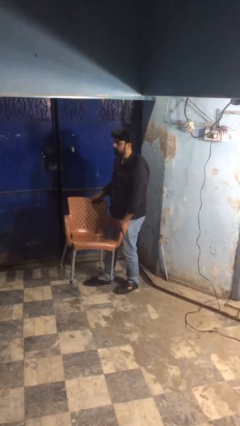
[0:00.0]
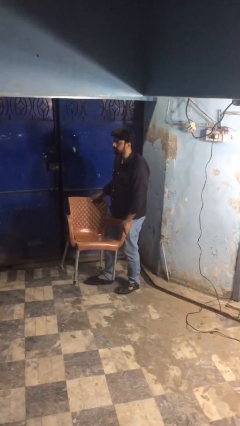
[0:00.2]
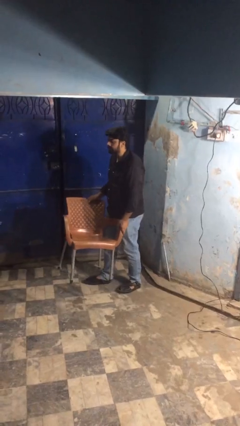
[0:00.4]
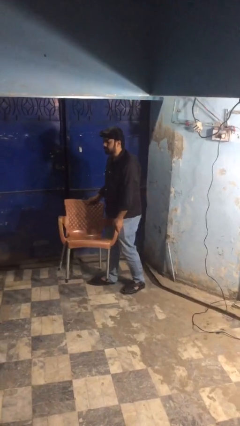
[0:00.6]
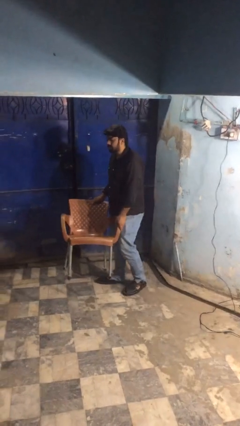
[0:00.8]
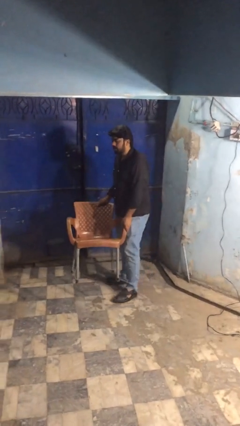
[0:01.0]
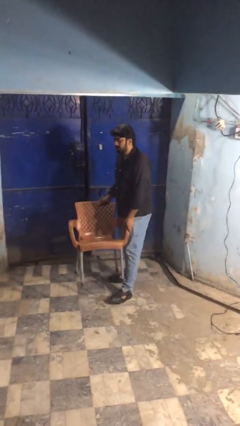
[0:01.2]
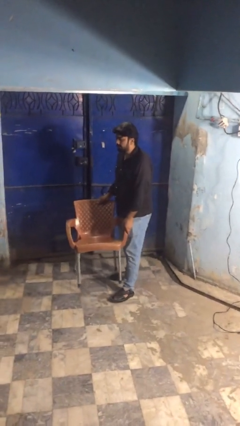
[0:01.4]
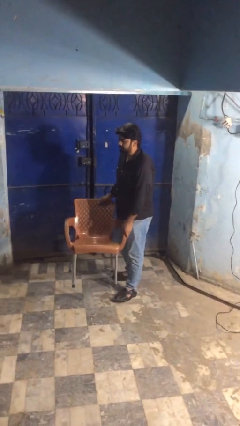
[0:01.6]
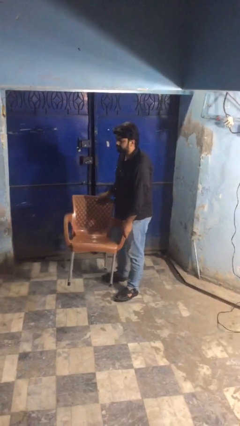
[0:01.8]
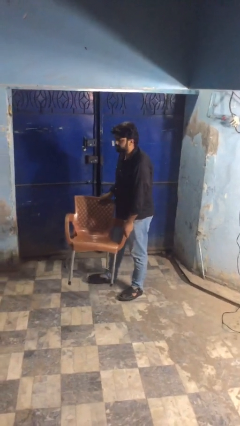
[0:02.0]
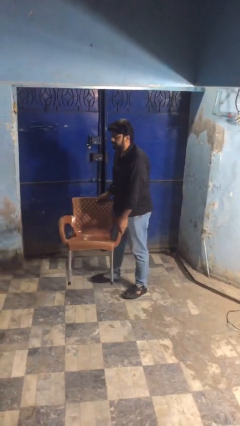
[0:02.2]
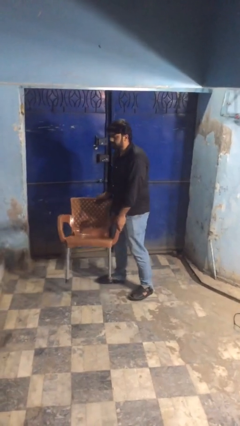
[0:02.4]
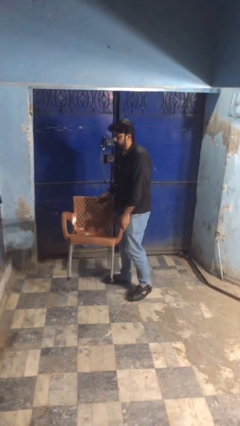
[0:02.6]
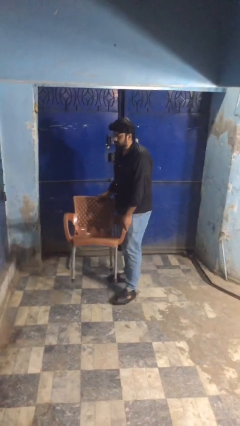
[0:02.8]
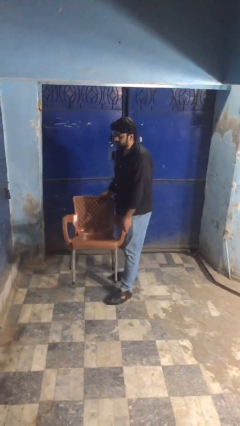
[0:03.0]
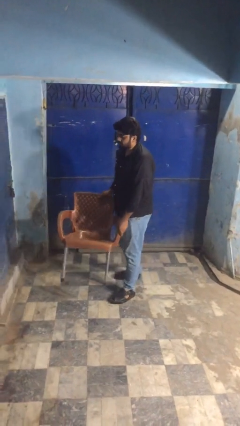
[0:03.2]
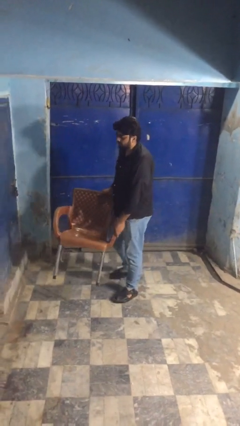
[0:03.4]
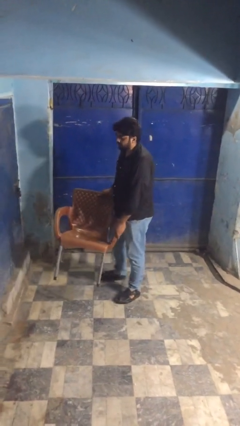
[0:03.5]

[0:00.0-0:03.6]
person carries heavy object

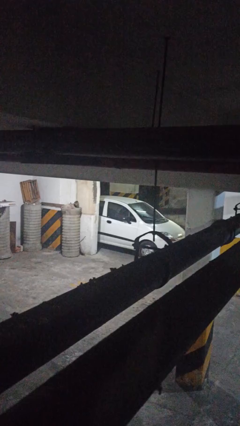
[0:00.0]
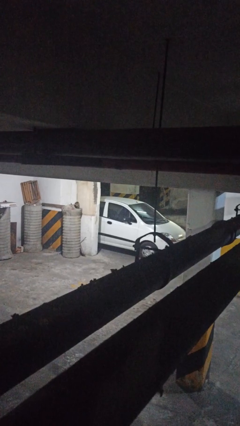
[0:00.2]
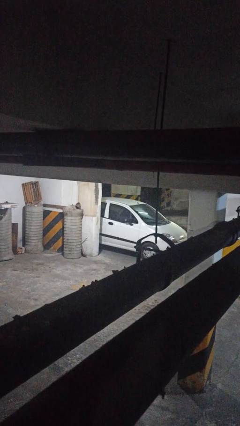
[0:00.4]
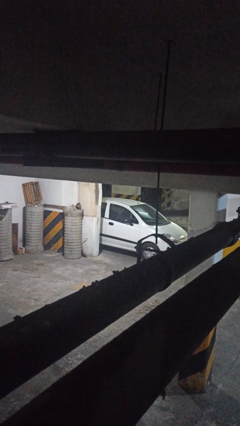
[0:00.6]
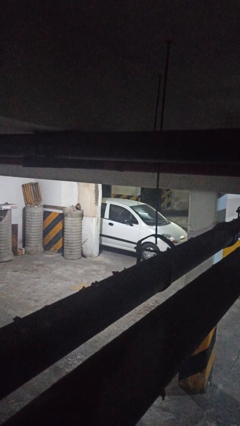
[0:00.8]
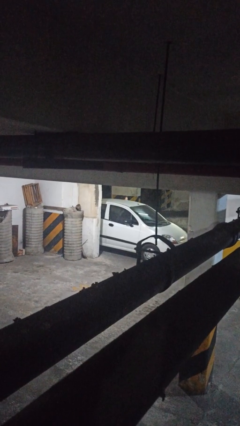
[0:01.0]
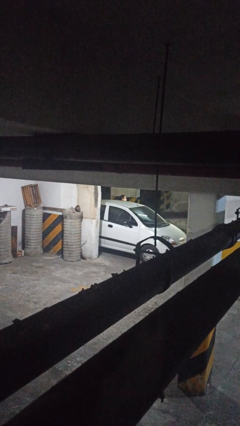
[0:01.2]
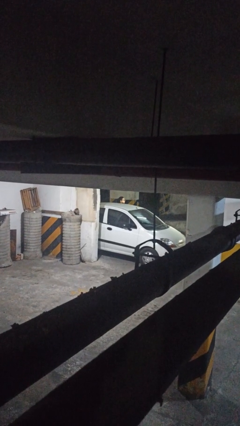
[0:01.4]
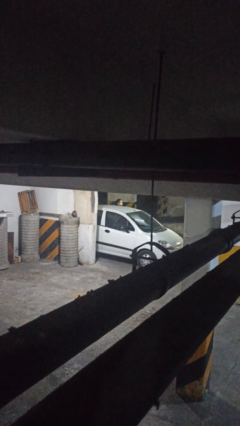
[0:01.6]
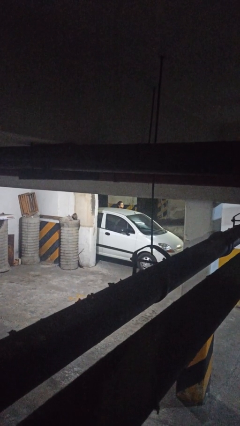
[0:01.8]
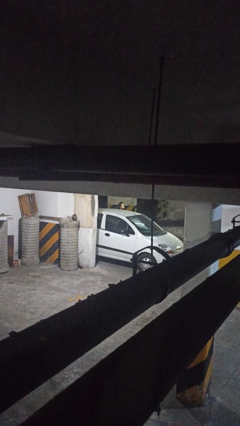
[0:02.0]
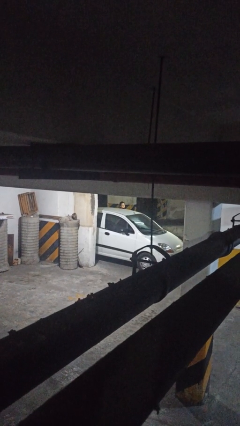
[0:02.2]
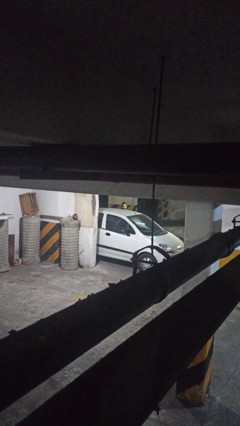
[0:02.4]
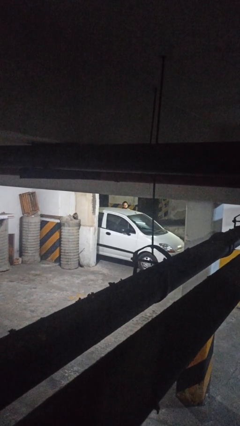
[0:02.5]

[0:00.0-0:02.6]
person exits car

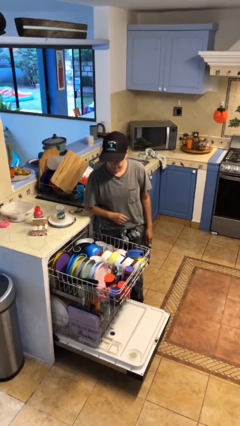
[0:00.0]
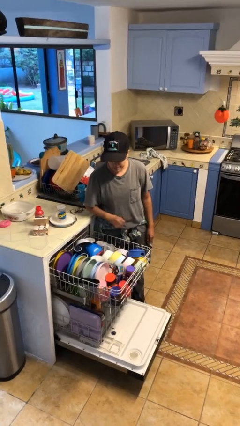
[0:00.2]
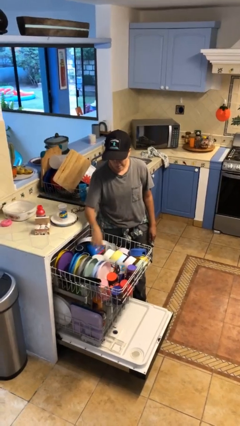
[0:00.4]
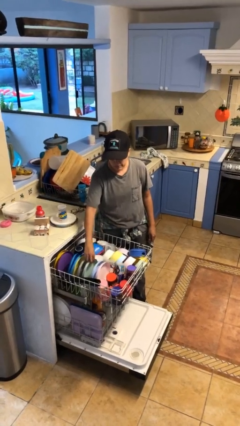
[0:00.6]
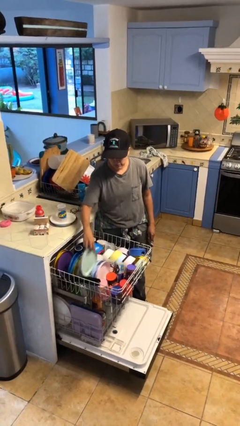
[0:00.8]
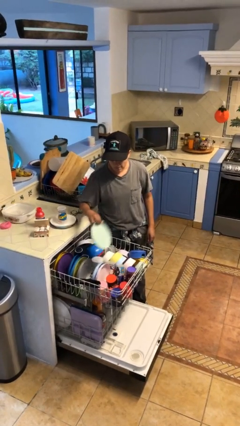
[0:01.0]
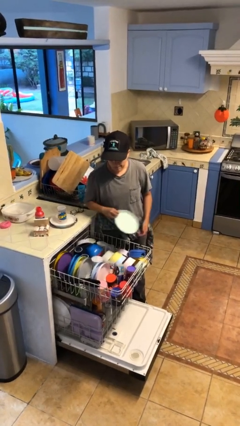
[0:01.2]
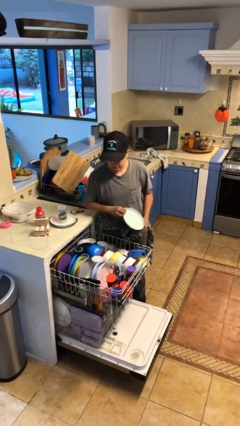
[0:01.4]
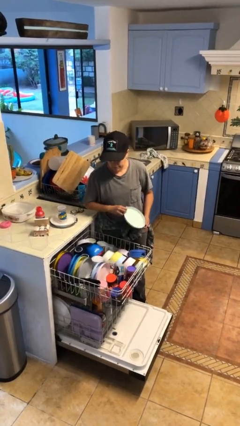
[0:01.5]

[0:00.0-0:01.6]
person unloads dishwasher

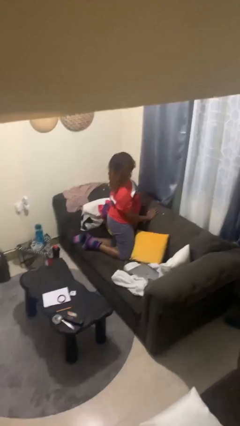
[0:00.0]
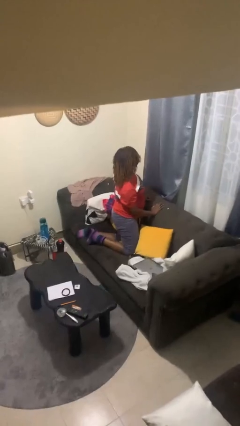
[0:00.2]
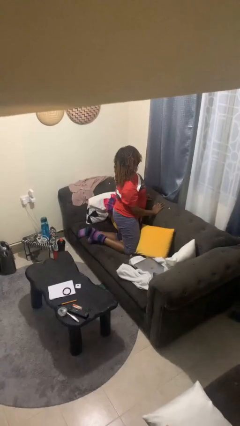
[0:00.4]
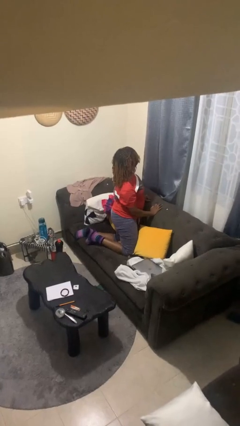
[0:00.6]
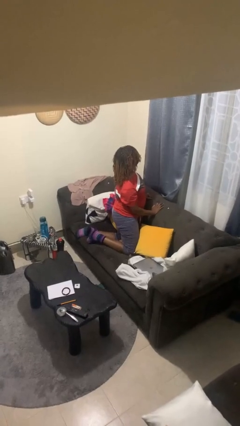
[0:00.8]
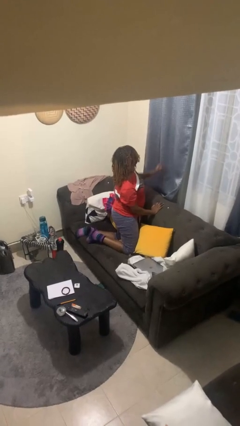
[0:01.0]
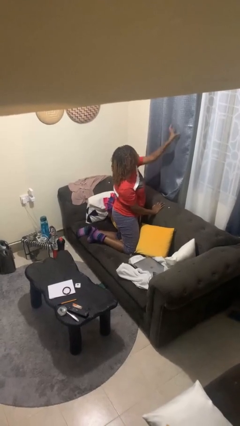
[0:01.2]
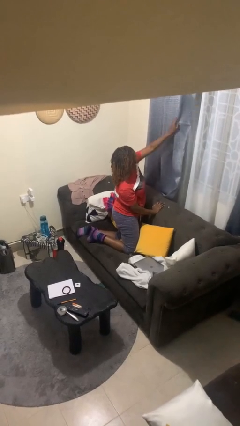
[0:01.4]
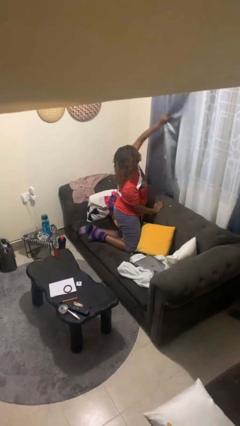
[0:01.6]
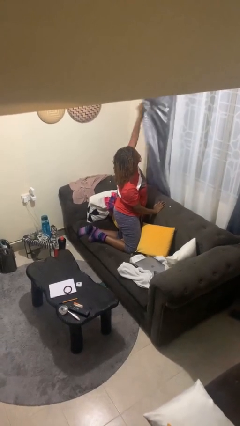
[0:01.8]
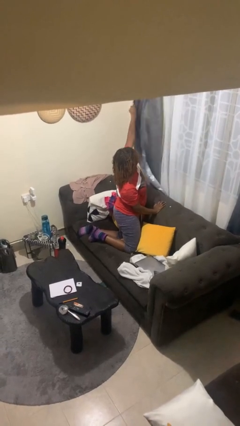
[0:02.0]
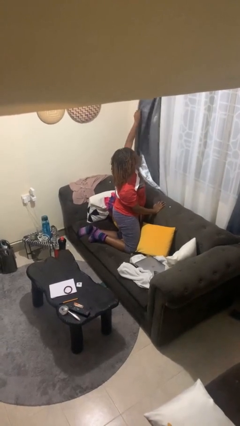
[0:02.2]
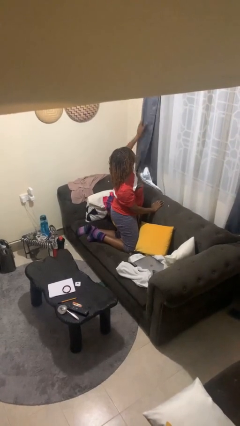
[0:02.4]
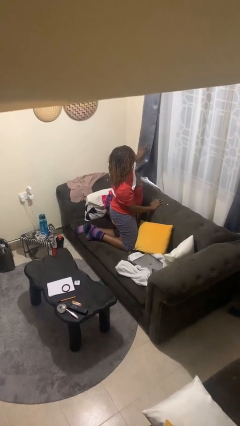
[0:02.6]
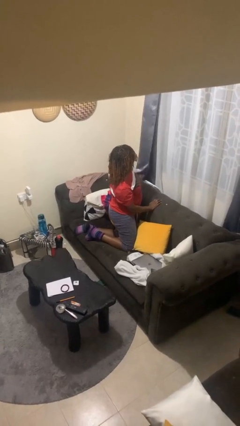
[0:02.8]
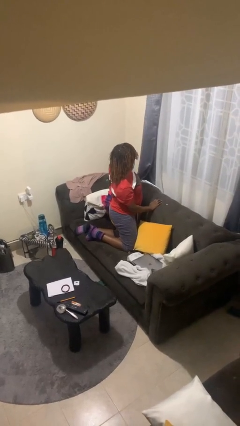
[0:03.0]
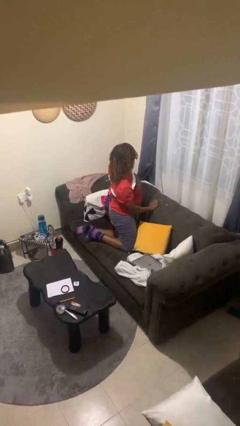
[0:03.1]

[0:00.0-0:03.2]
person opens curtains

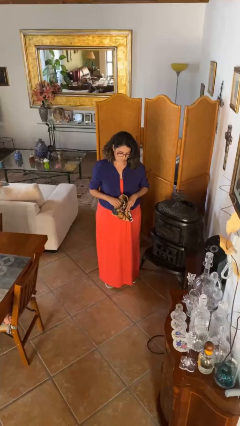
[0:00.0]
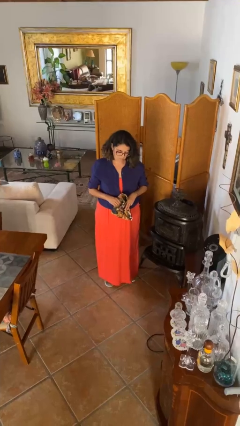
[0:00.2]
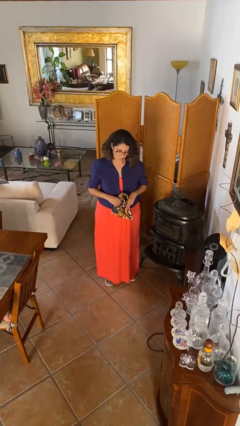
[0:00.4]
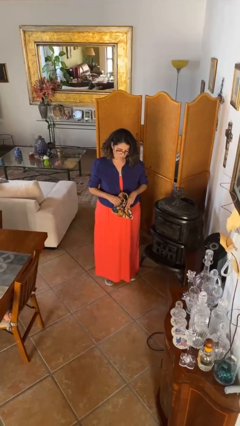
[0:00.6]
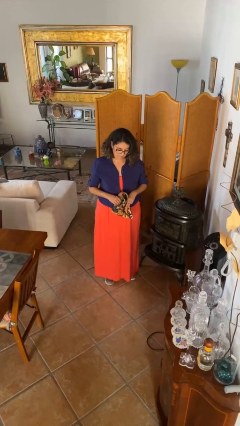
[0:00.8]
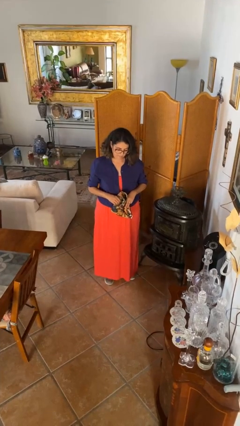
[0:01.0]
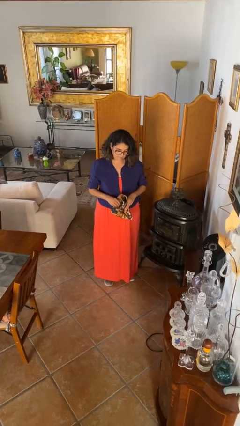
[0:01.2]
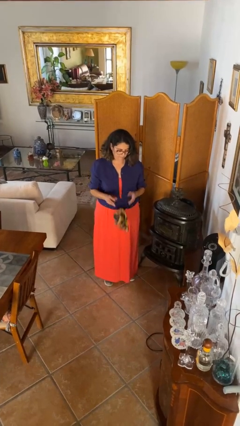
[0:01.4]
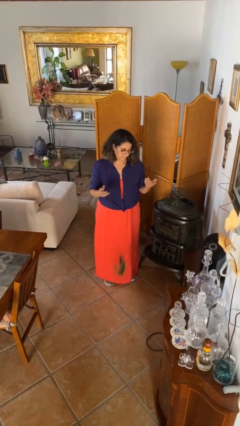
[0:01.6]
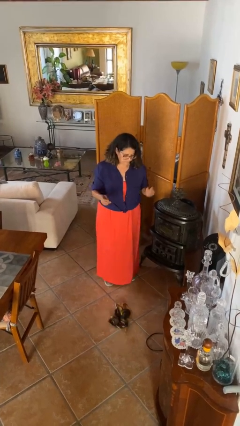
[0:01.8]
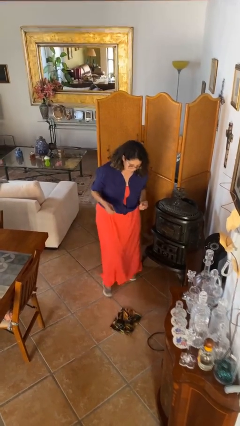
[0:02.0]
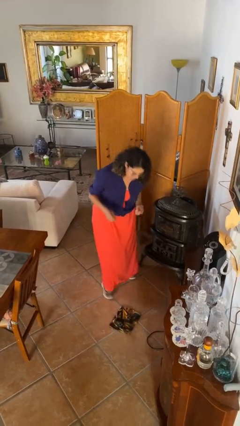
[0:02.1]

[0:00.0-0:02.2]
person drops object

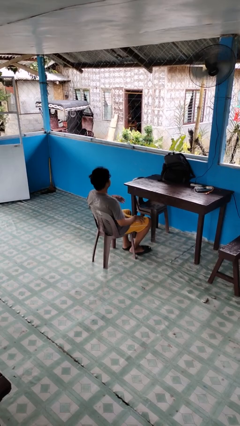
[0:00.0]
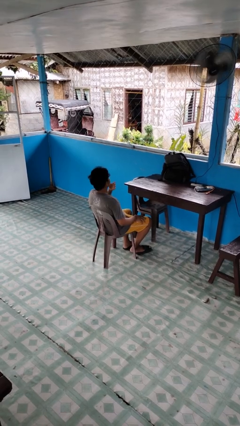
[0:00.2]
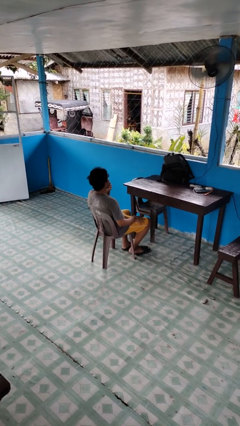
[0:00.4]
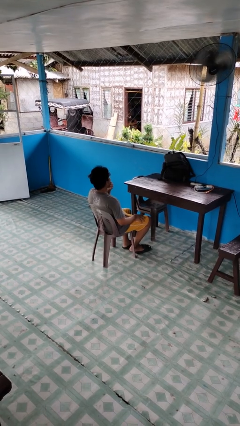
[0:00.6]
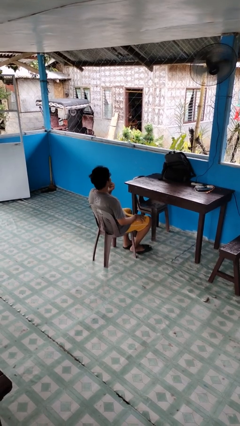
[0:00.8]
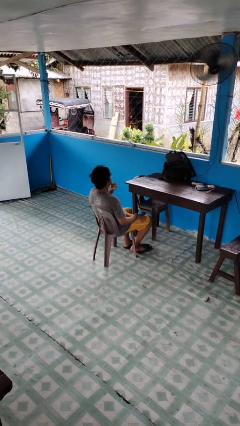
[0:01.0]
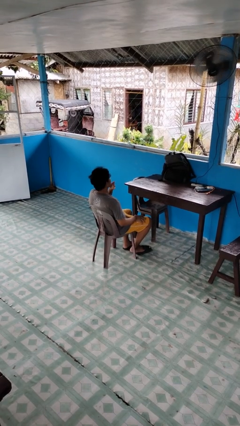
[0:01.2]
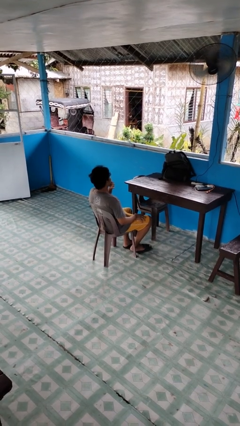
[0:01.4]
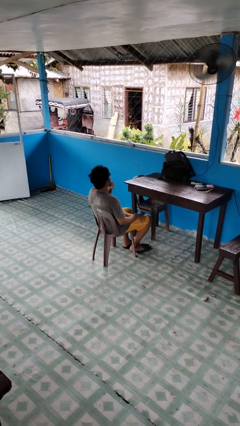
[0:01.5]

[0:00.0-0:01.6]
person strokes chin

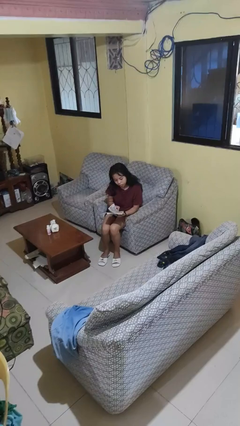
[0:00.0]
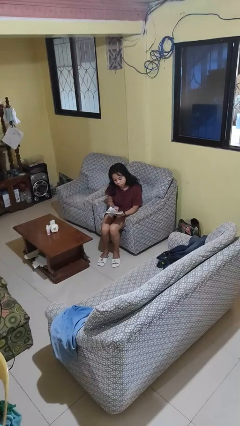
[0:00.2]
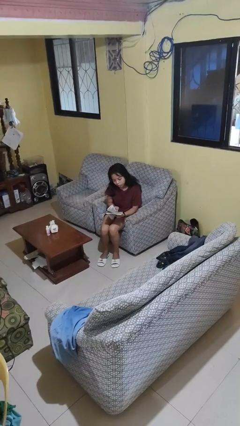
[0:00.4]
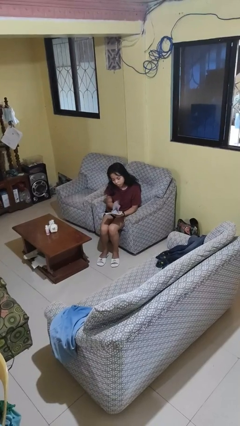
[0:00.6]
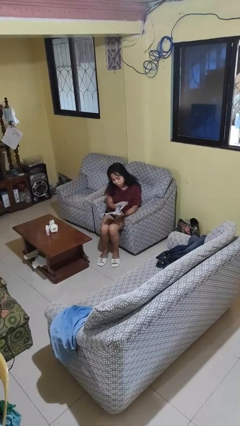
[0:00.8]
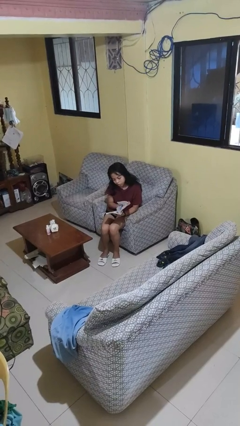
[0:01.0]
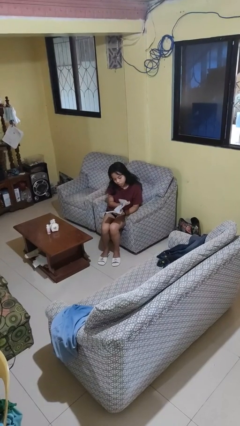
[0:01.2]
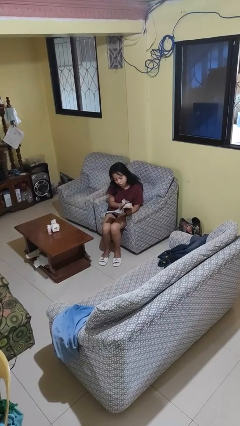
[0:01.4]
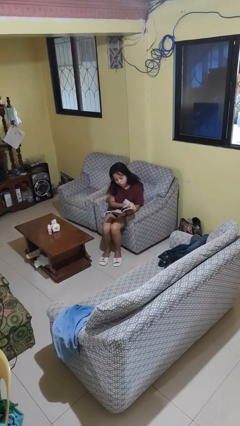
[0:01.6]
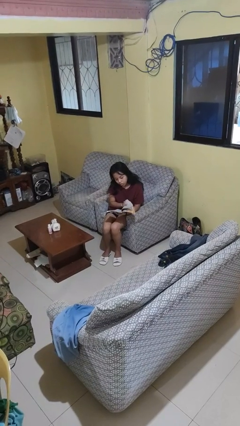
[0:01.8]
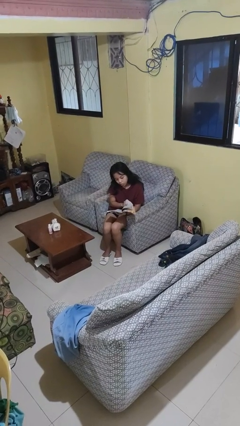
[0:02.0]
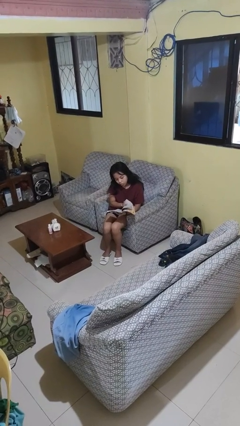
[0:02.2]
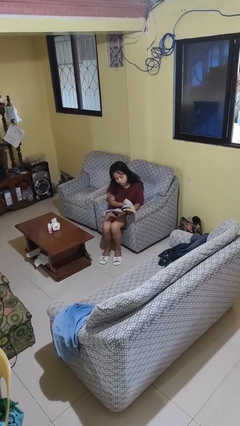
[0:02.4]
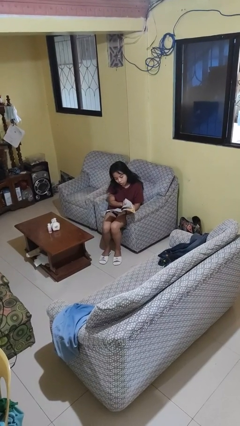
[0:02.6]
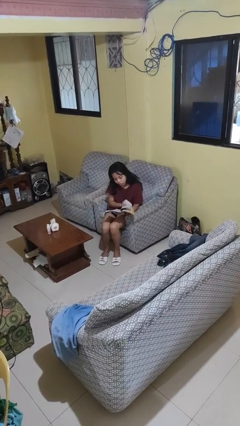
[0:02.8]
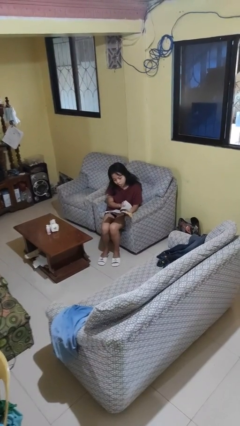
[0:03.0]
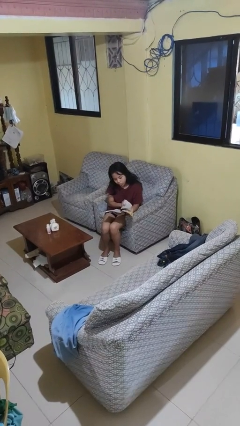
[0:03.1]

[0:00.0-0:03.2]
person reads magazine
